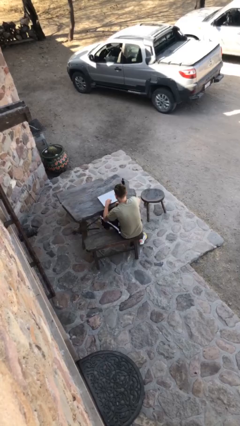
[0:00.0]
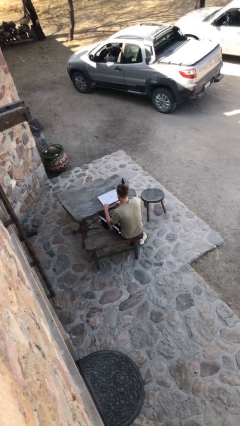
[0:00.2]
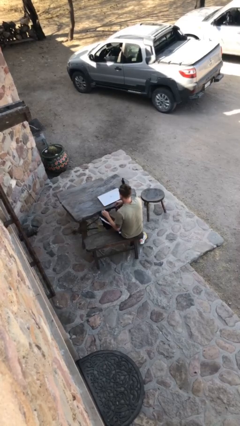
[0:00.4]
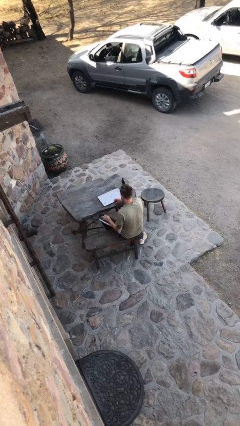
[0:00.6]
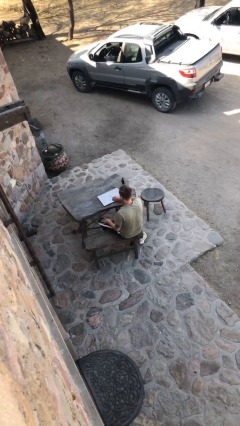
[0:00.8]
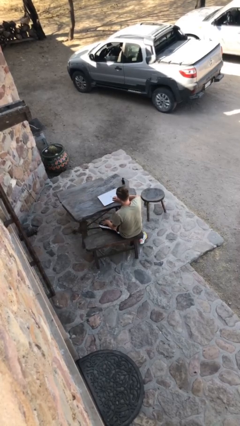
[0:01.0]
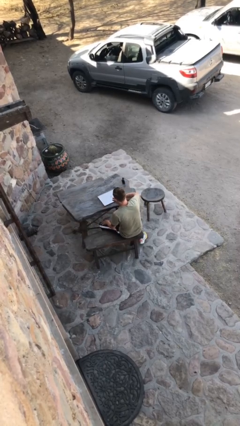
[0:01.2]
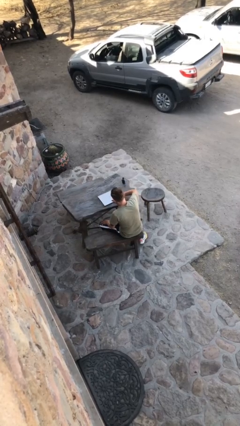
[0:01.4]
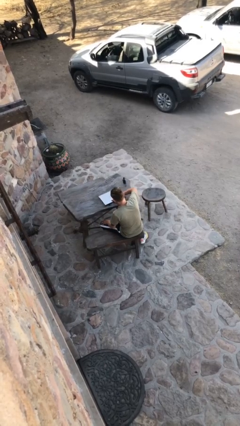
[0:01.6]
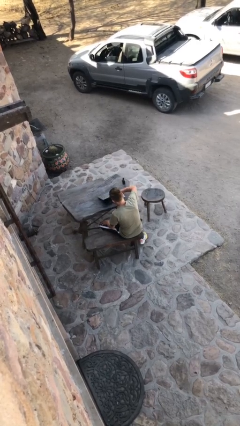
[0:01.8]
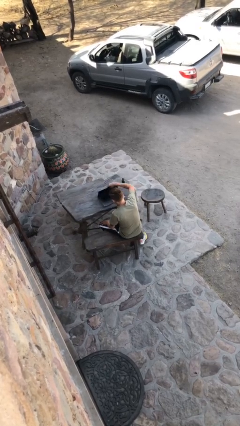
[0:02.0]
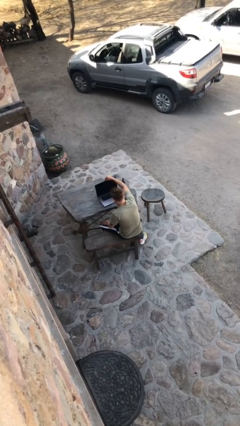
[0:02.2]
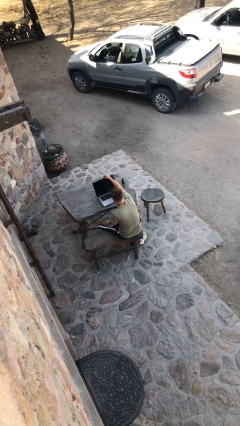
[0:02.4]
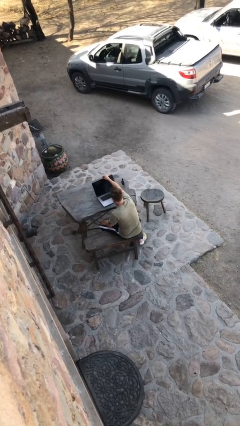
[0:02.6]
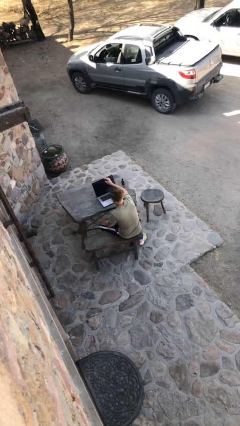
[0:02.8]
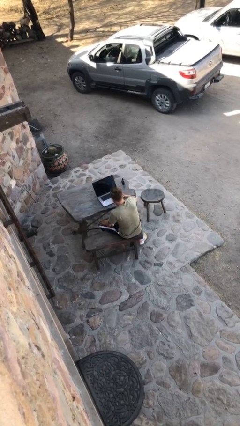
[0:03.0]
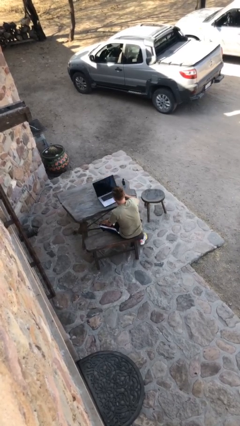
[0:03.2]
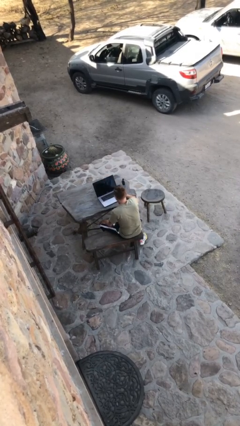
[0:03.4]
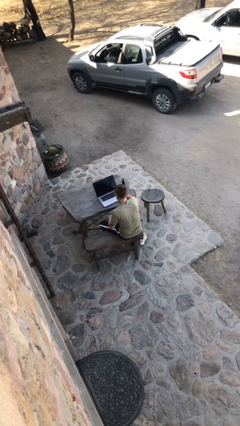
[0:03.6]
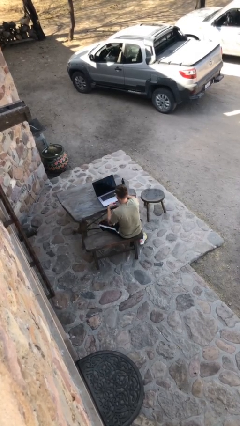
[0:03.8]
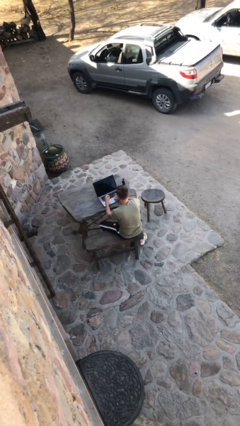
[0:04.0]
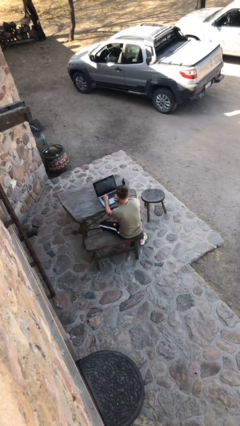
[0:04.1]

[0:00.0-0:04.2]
person interacts with laptop

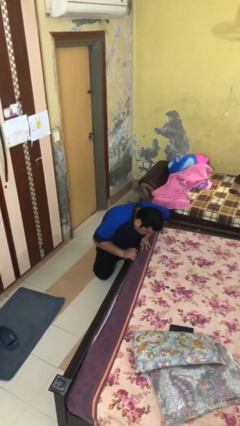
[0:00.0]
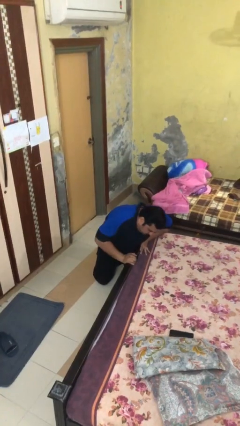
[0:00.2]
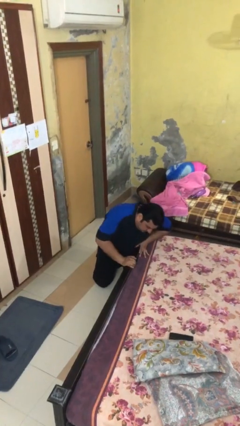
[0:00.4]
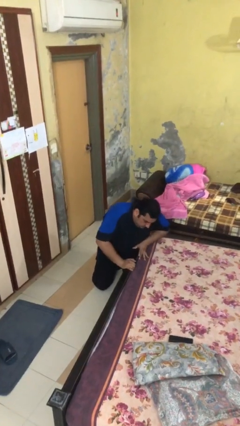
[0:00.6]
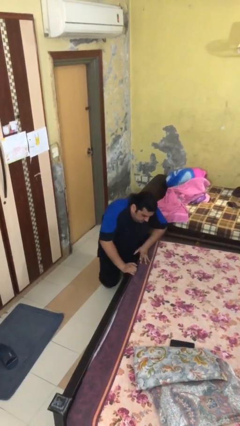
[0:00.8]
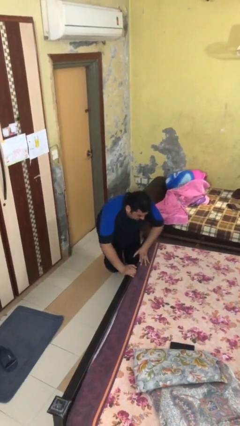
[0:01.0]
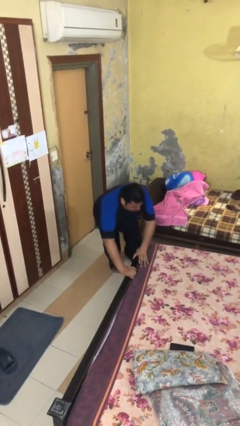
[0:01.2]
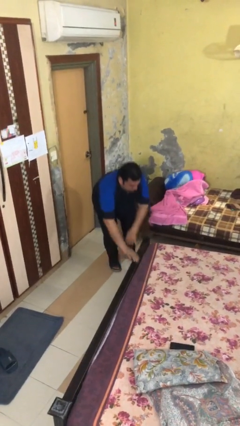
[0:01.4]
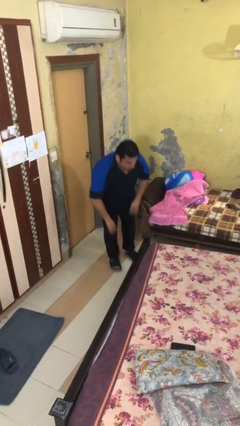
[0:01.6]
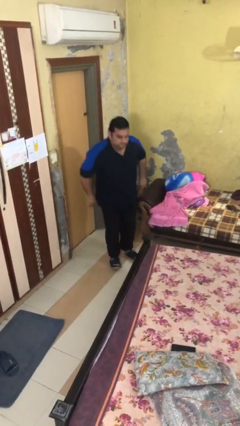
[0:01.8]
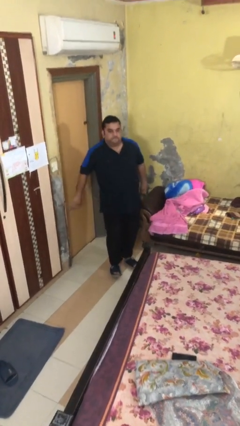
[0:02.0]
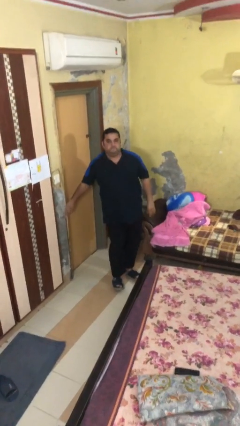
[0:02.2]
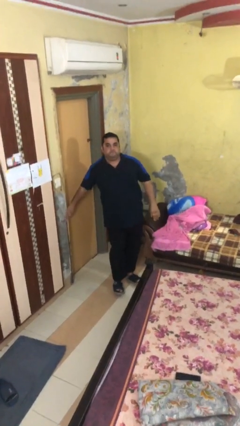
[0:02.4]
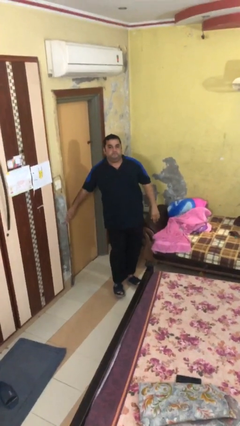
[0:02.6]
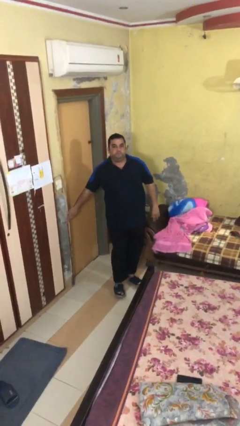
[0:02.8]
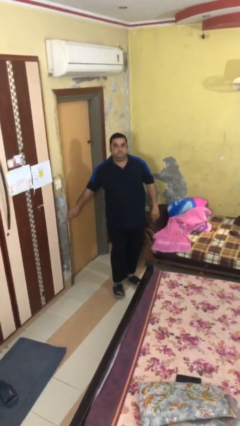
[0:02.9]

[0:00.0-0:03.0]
person stands up from floor

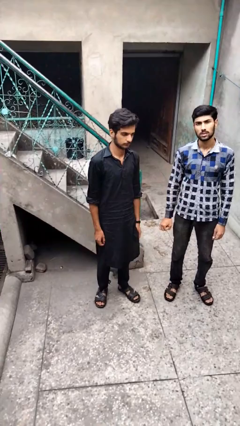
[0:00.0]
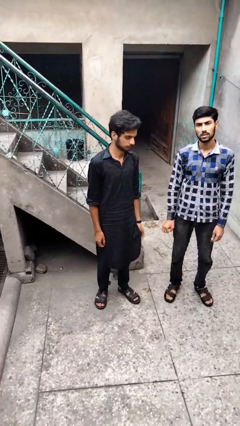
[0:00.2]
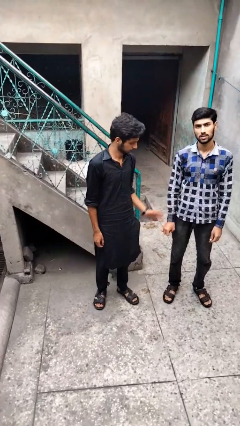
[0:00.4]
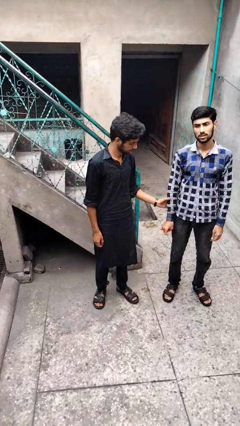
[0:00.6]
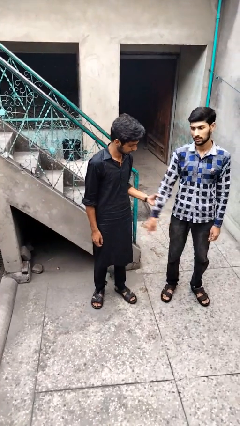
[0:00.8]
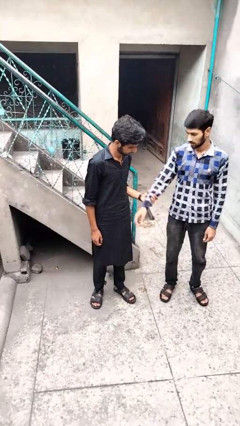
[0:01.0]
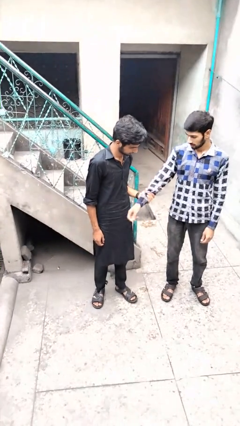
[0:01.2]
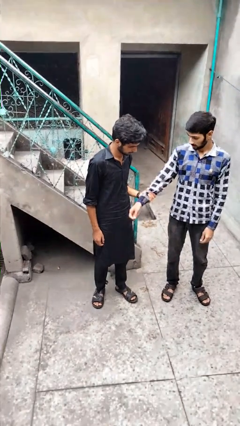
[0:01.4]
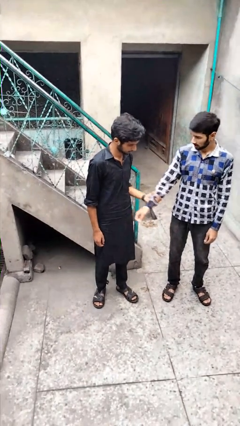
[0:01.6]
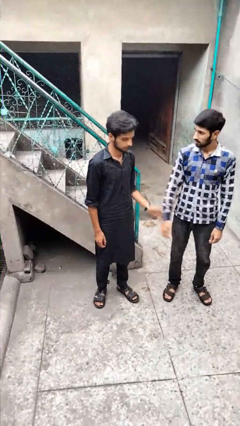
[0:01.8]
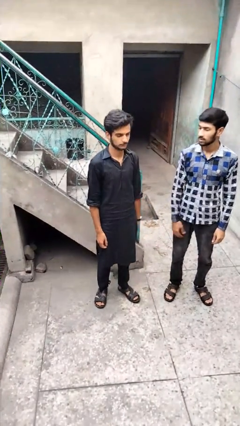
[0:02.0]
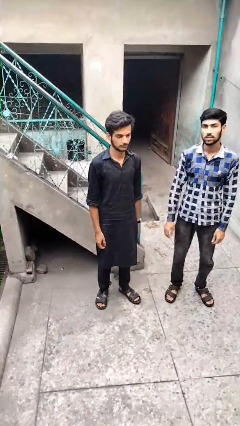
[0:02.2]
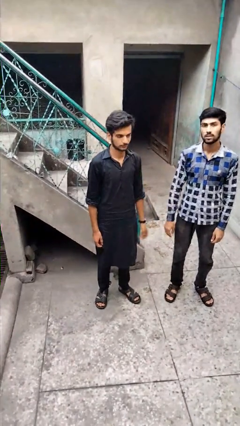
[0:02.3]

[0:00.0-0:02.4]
person grabs person by forearm

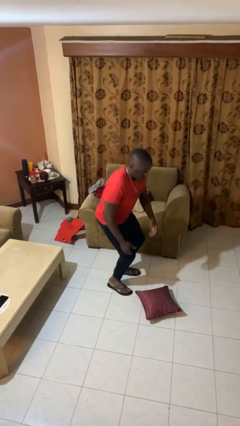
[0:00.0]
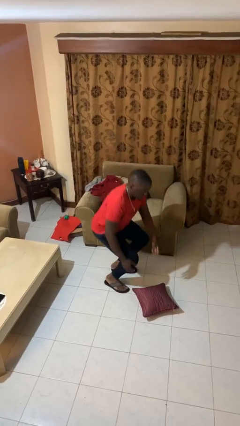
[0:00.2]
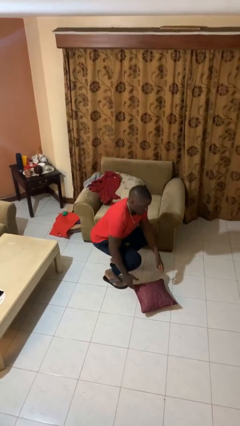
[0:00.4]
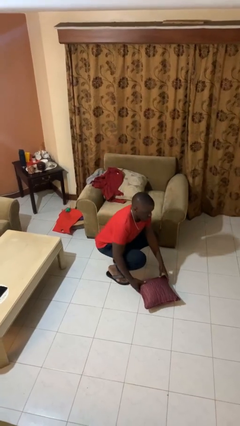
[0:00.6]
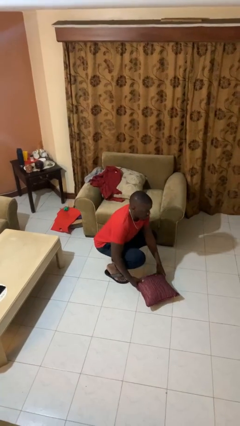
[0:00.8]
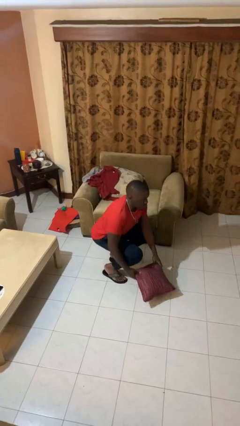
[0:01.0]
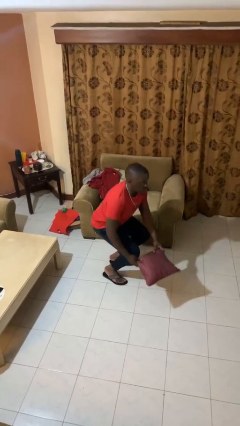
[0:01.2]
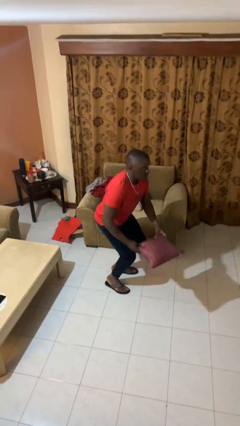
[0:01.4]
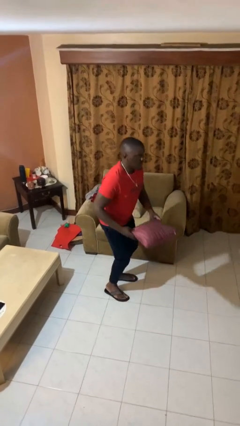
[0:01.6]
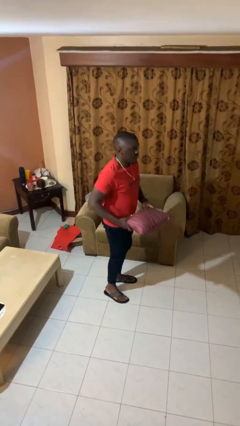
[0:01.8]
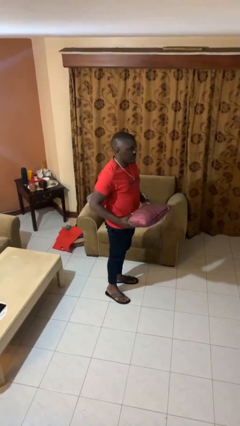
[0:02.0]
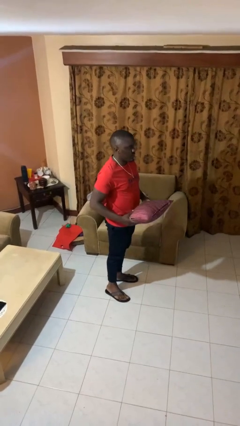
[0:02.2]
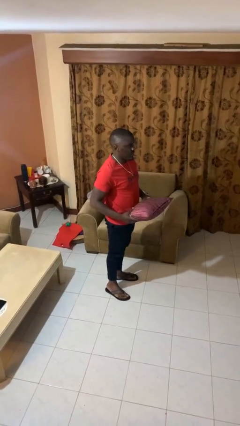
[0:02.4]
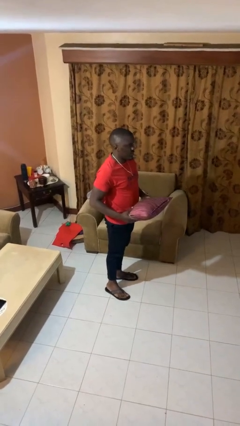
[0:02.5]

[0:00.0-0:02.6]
person picks up object from floor

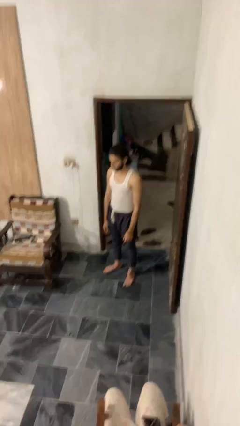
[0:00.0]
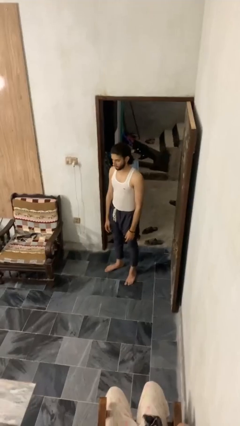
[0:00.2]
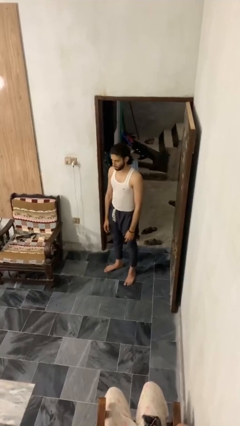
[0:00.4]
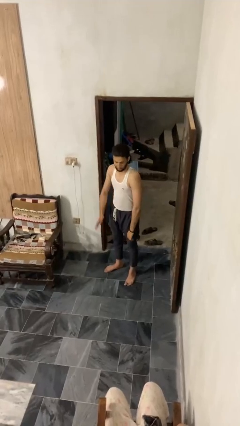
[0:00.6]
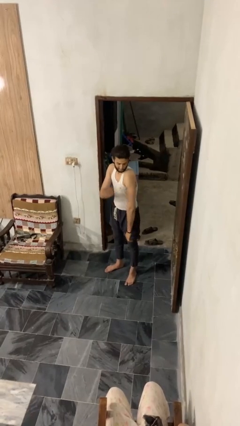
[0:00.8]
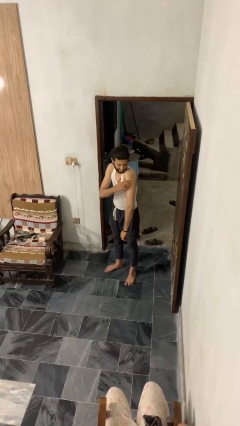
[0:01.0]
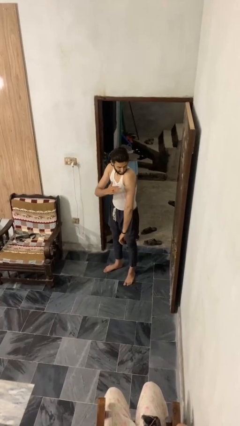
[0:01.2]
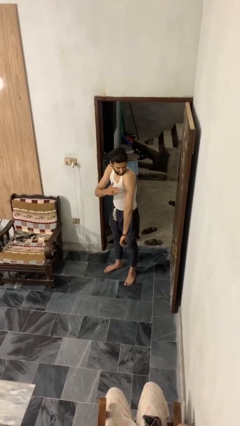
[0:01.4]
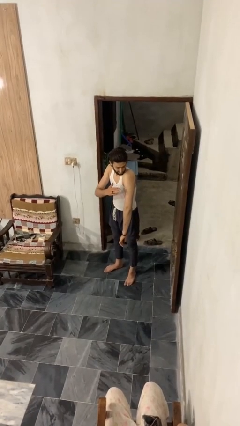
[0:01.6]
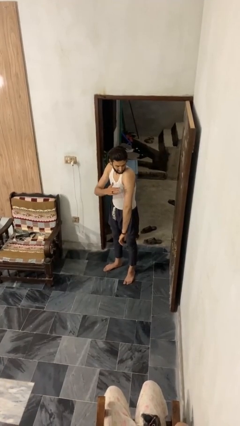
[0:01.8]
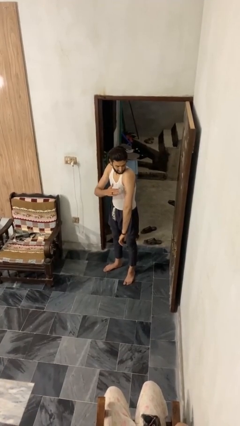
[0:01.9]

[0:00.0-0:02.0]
person swats bug

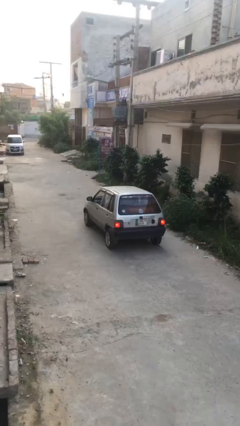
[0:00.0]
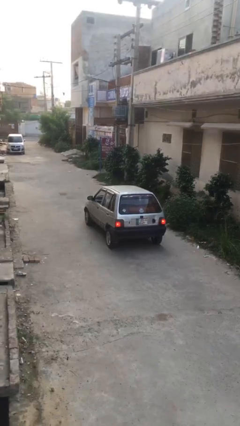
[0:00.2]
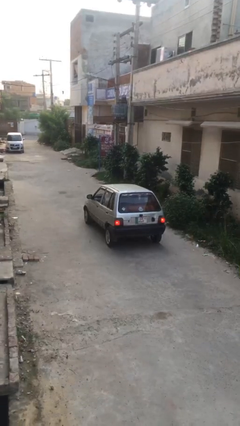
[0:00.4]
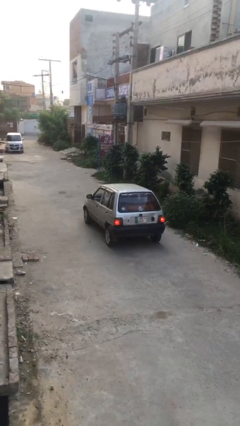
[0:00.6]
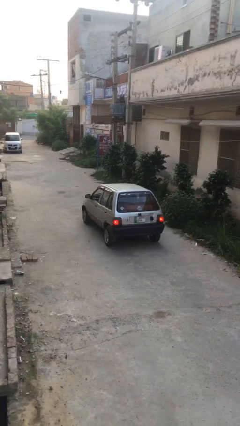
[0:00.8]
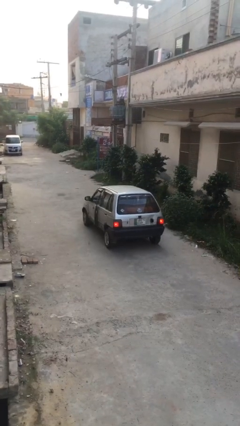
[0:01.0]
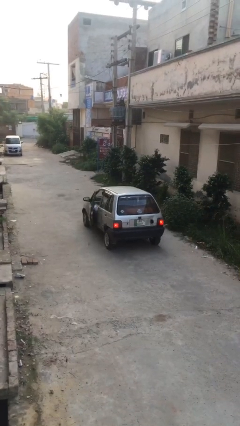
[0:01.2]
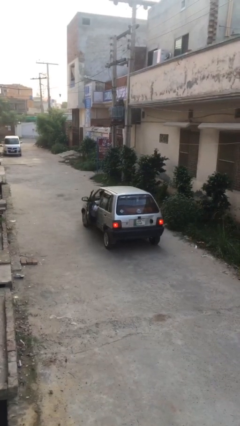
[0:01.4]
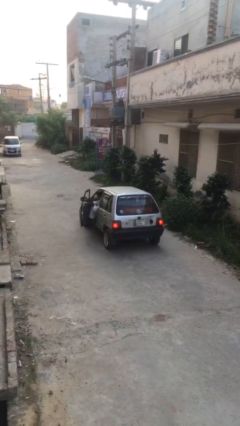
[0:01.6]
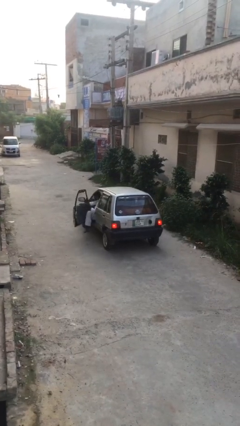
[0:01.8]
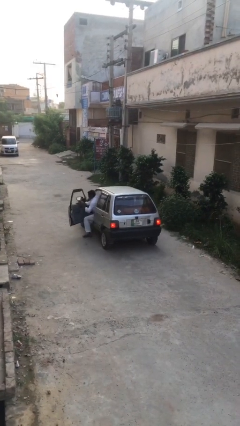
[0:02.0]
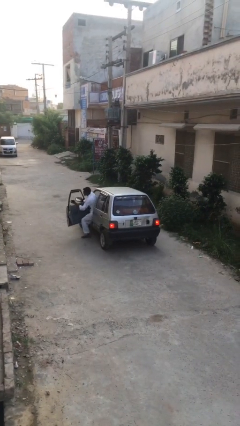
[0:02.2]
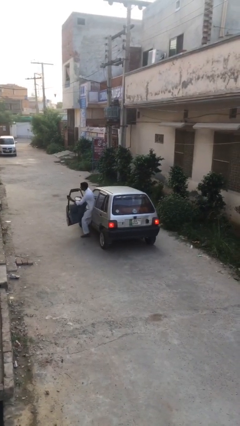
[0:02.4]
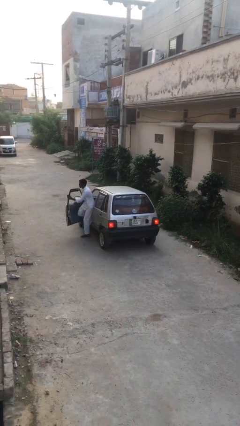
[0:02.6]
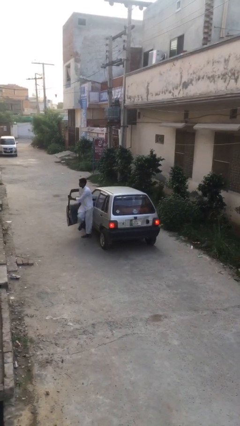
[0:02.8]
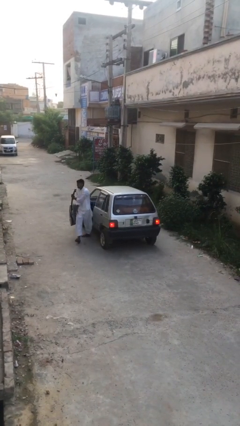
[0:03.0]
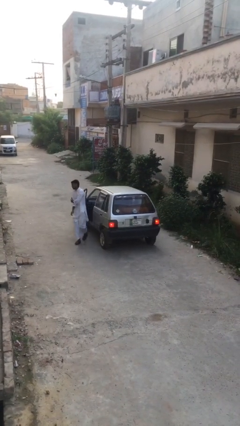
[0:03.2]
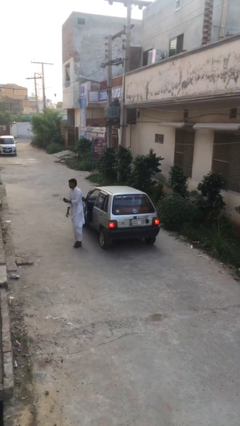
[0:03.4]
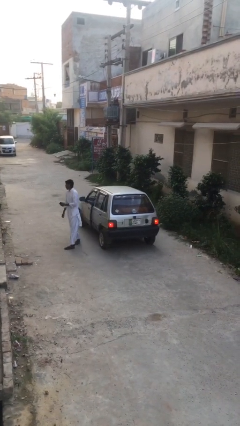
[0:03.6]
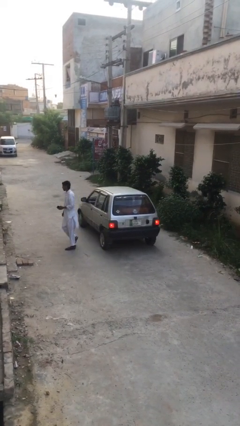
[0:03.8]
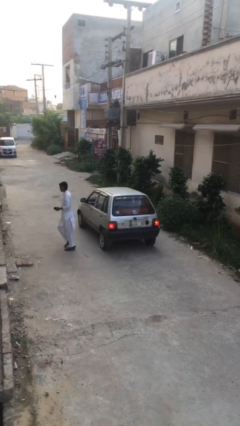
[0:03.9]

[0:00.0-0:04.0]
car drops off person
